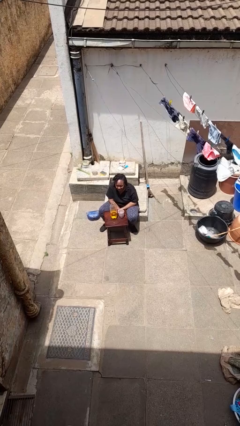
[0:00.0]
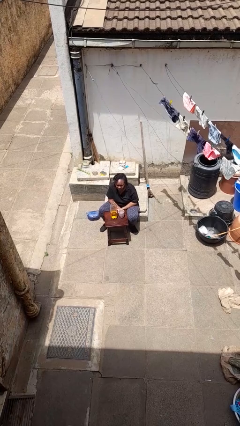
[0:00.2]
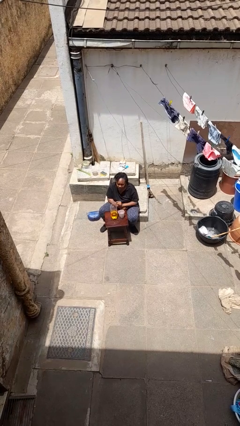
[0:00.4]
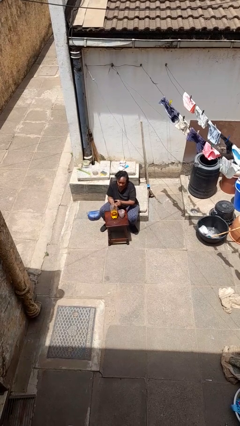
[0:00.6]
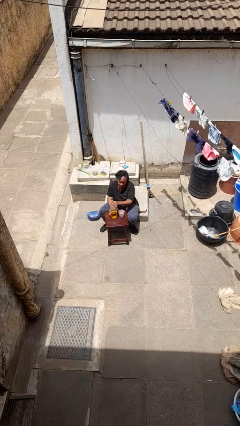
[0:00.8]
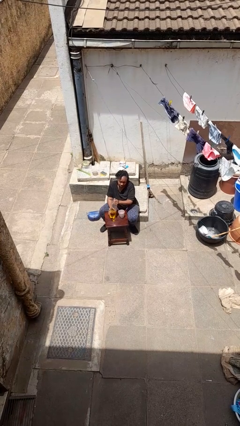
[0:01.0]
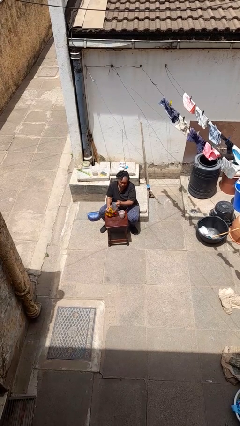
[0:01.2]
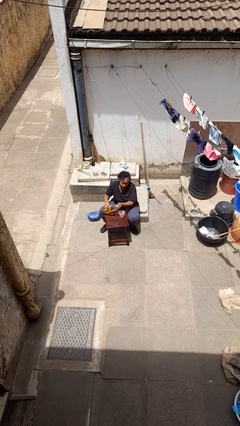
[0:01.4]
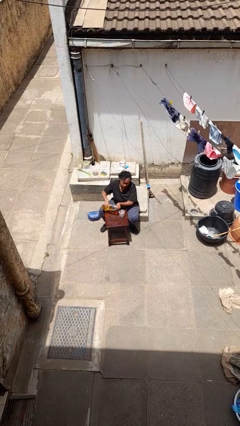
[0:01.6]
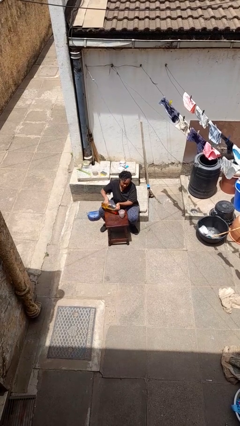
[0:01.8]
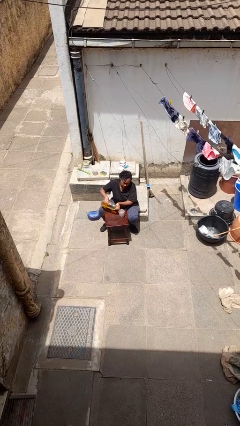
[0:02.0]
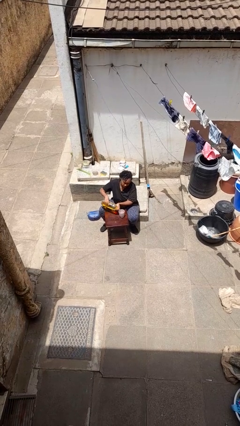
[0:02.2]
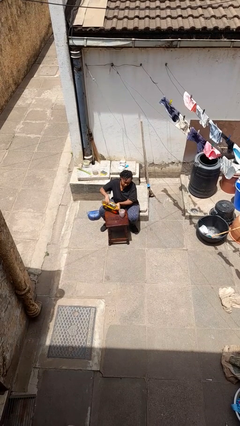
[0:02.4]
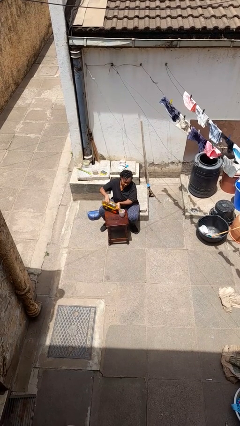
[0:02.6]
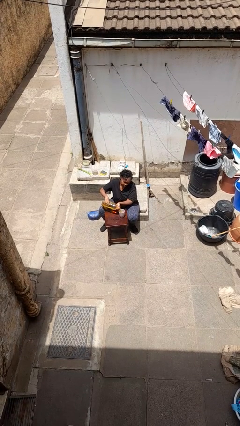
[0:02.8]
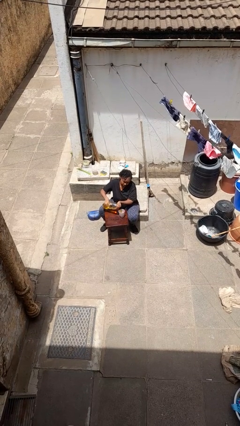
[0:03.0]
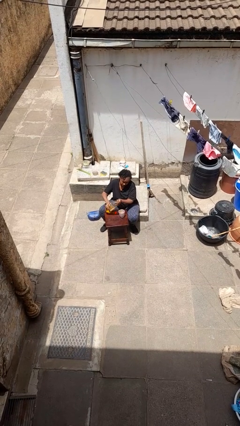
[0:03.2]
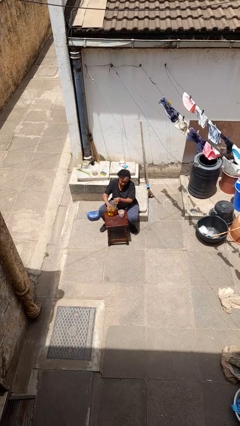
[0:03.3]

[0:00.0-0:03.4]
person pours liquid into cup

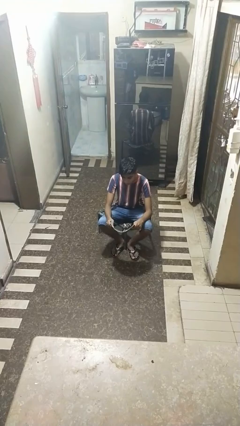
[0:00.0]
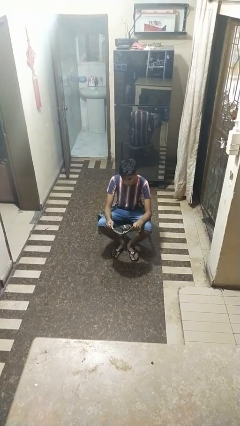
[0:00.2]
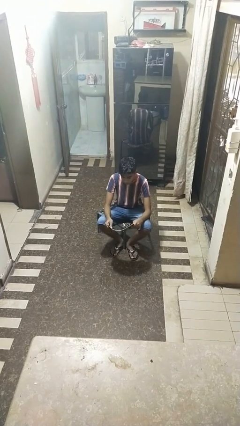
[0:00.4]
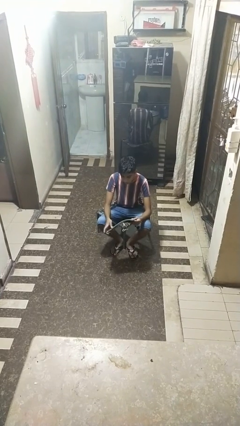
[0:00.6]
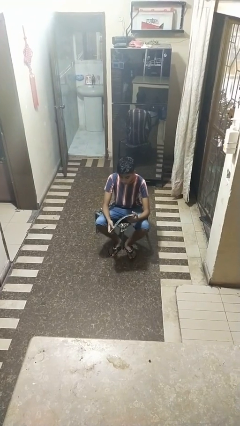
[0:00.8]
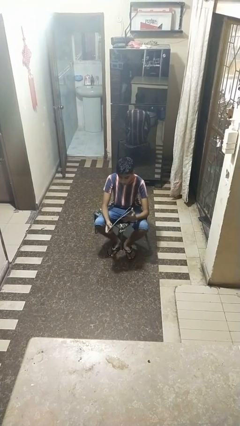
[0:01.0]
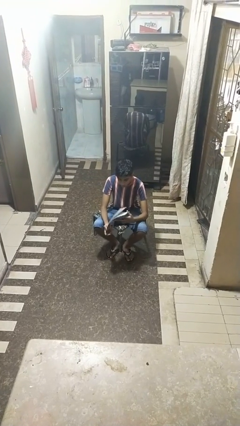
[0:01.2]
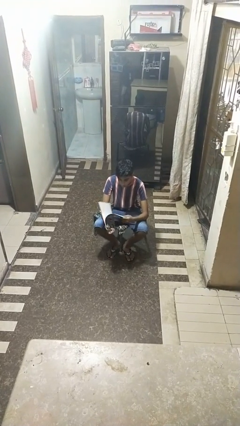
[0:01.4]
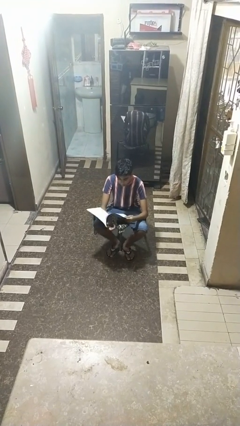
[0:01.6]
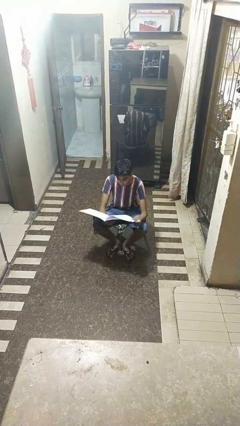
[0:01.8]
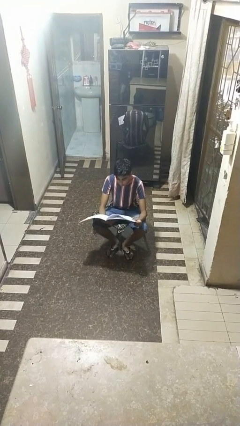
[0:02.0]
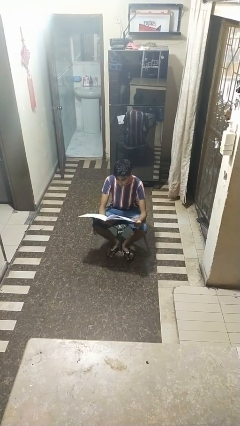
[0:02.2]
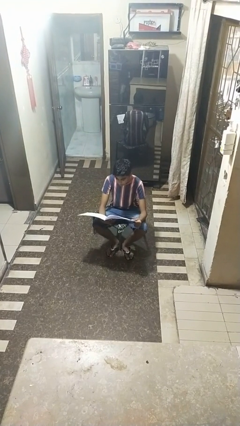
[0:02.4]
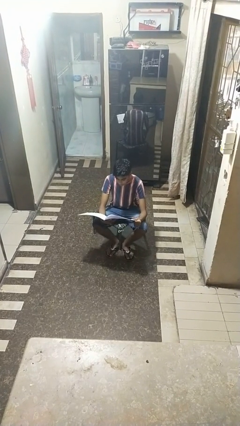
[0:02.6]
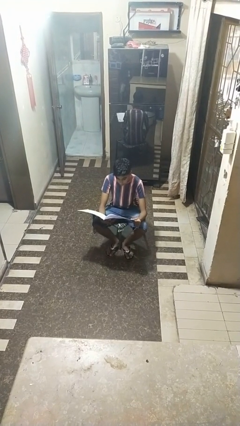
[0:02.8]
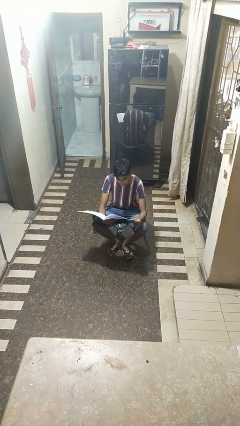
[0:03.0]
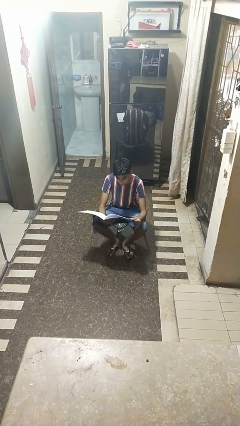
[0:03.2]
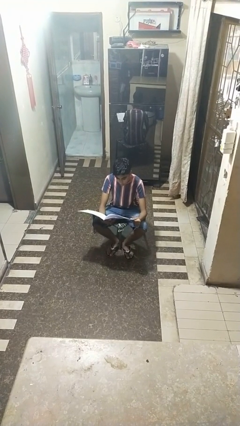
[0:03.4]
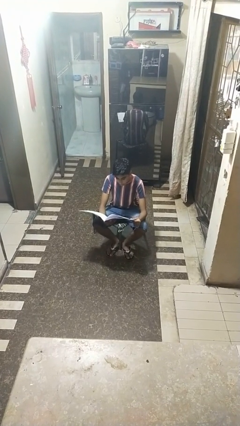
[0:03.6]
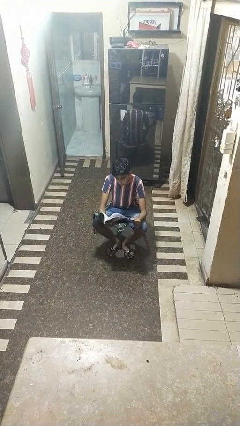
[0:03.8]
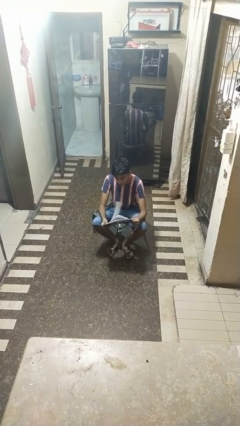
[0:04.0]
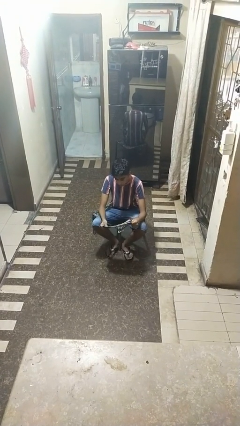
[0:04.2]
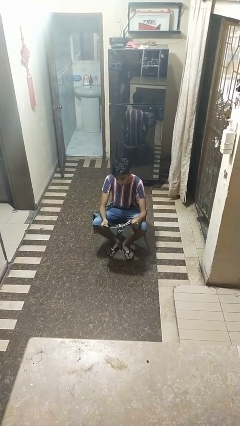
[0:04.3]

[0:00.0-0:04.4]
person reads magazine

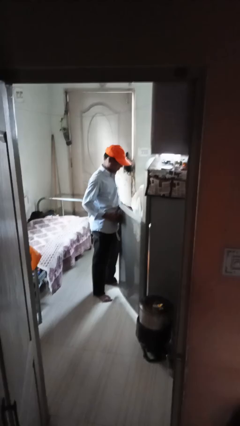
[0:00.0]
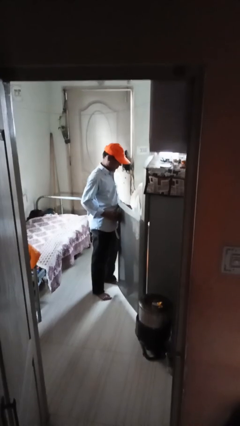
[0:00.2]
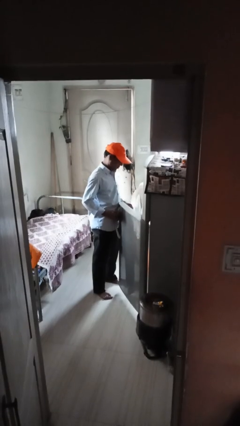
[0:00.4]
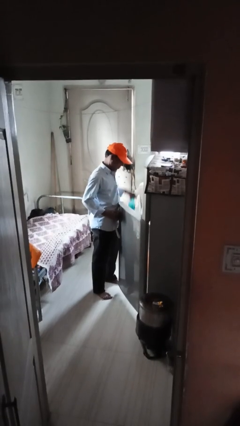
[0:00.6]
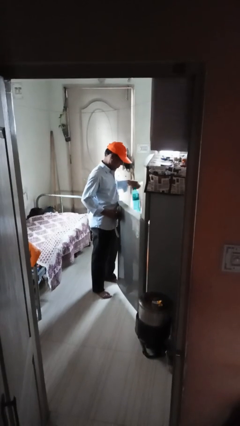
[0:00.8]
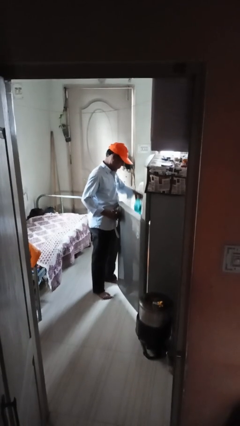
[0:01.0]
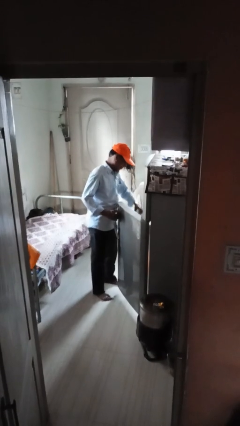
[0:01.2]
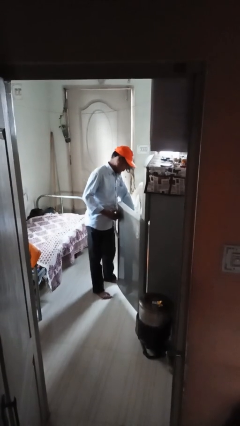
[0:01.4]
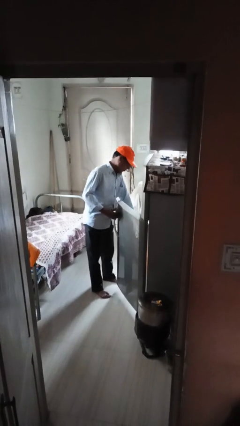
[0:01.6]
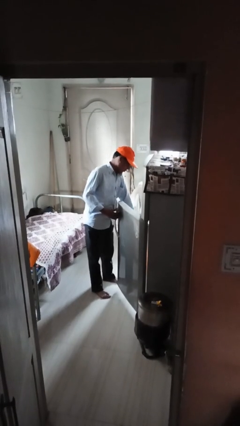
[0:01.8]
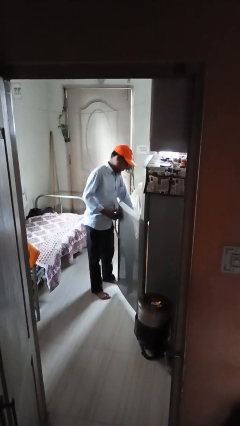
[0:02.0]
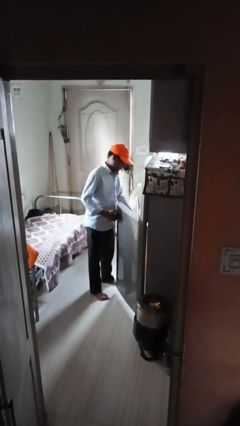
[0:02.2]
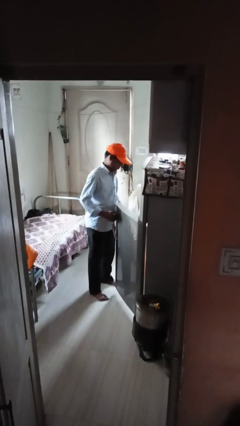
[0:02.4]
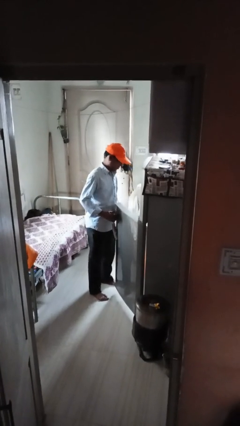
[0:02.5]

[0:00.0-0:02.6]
person puts object into refrigerator

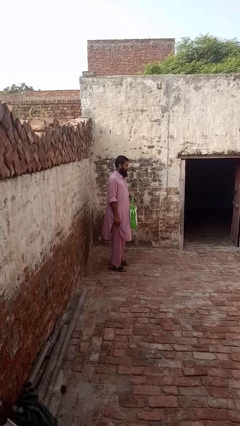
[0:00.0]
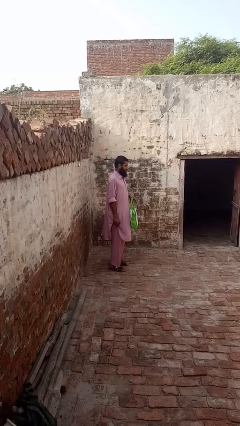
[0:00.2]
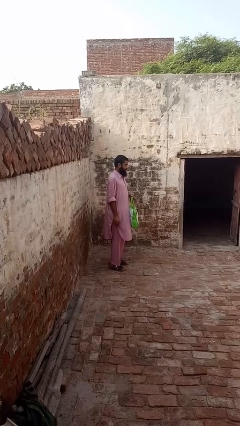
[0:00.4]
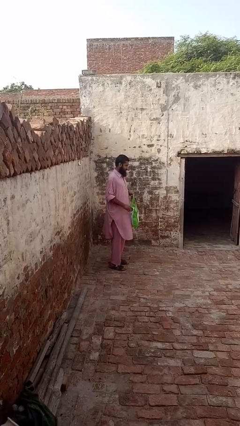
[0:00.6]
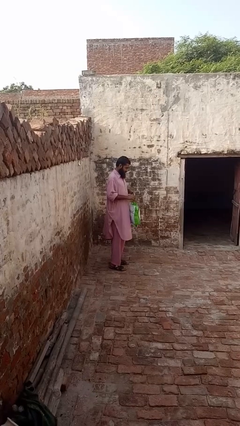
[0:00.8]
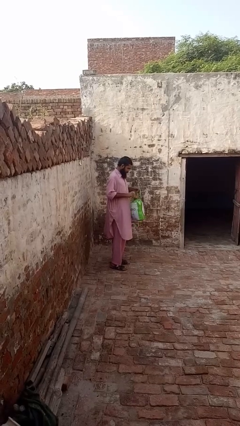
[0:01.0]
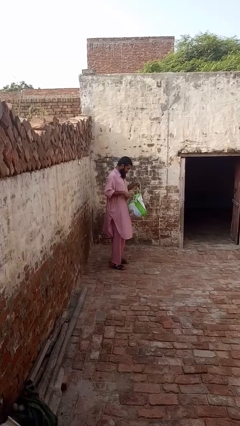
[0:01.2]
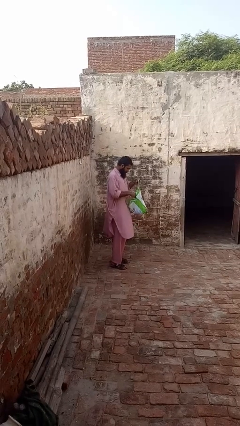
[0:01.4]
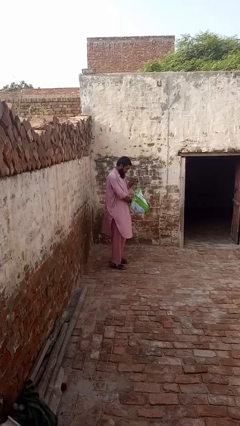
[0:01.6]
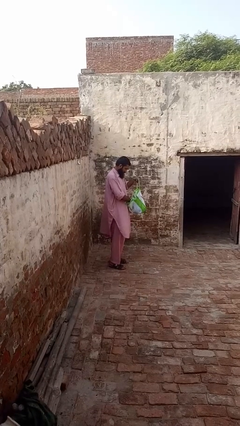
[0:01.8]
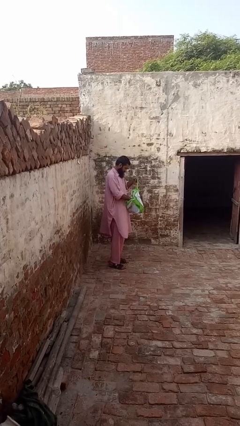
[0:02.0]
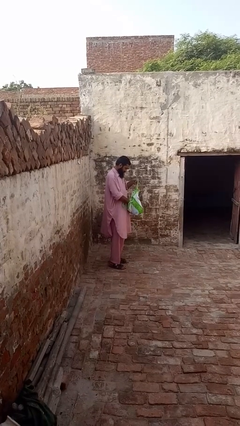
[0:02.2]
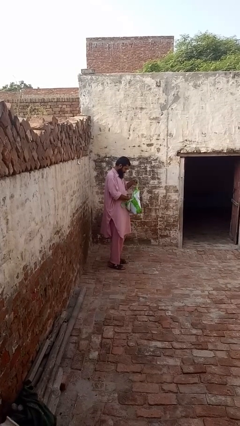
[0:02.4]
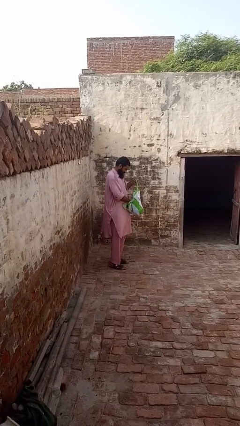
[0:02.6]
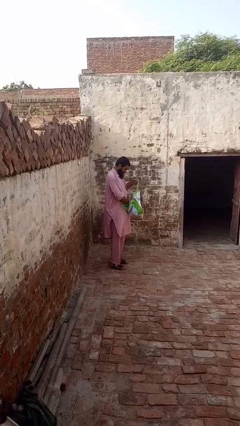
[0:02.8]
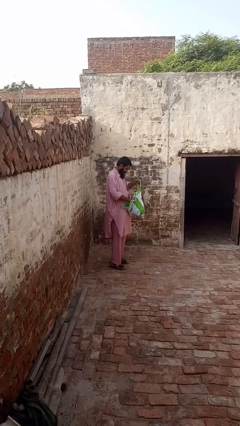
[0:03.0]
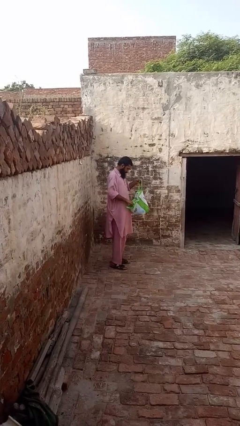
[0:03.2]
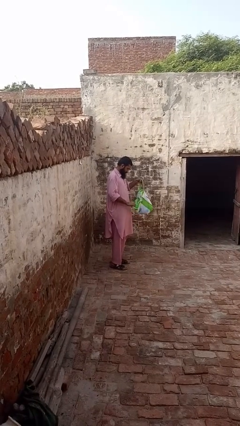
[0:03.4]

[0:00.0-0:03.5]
person searches in bag

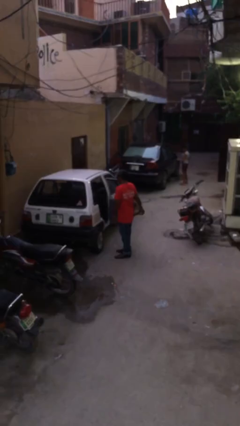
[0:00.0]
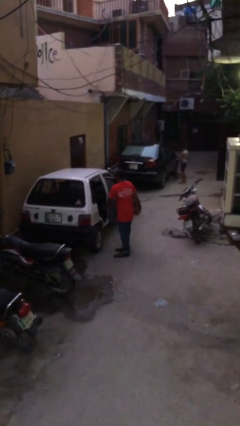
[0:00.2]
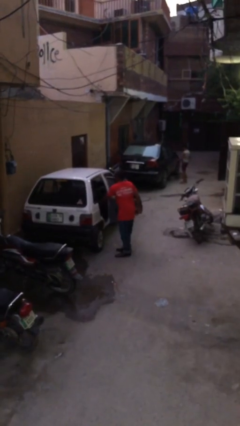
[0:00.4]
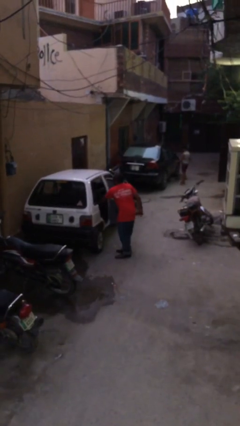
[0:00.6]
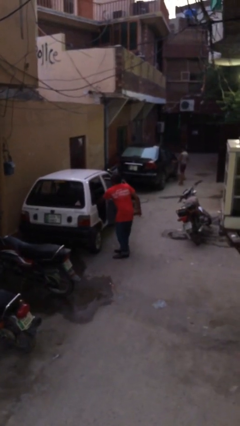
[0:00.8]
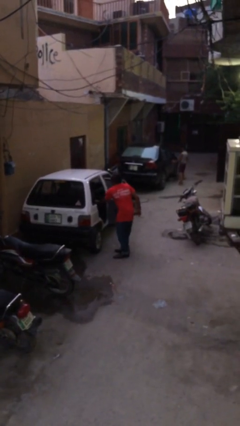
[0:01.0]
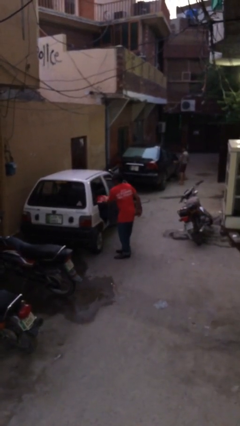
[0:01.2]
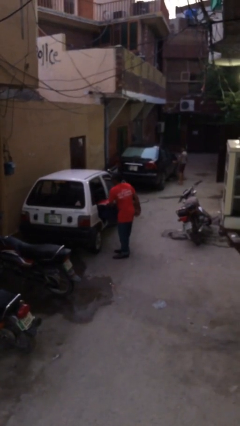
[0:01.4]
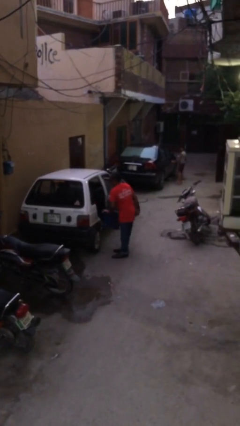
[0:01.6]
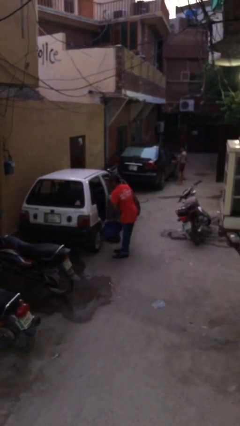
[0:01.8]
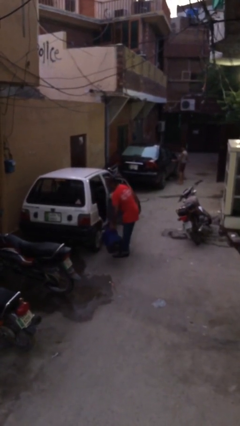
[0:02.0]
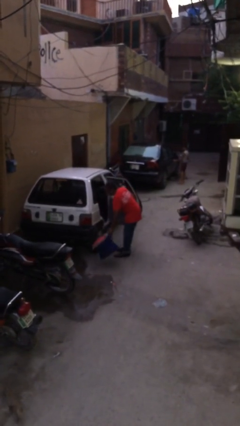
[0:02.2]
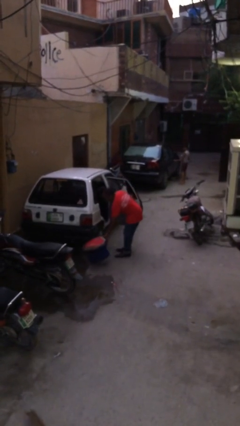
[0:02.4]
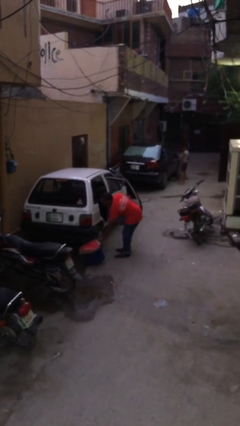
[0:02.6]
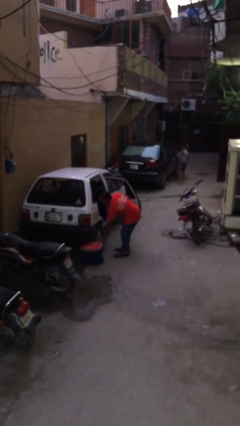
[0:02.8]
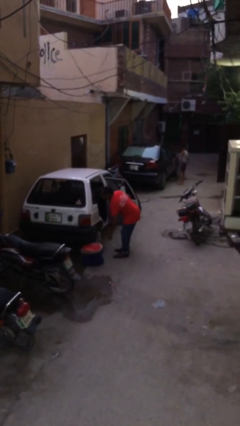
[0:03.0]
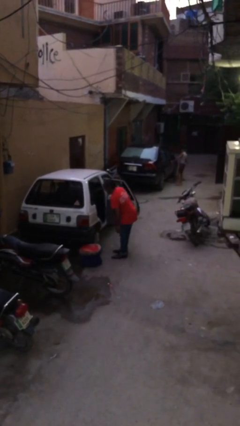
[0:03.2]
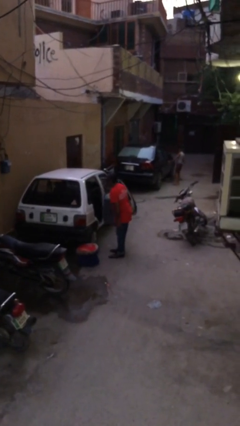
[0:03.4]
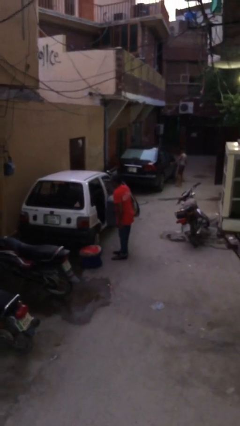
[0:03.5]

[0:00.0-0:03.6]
person unloads car

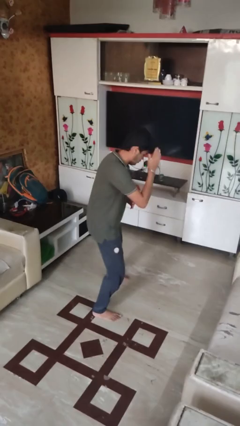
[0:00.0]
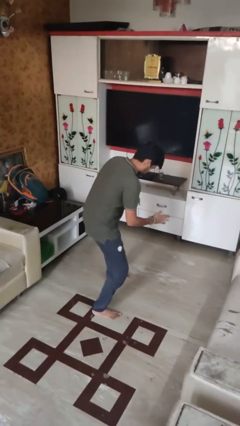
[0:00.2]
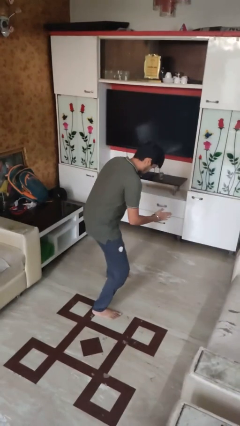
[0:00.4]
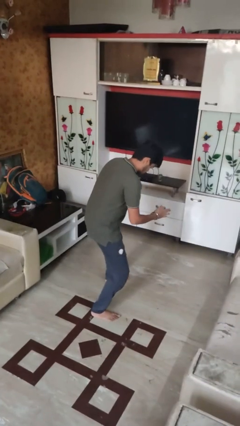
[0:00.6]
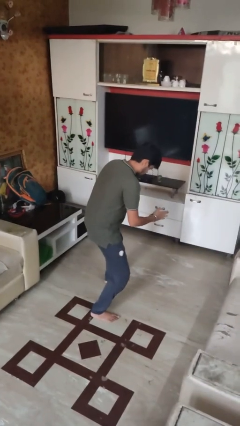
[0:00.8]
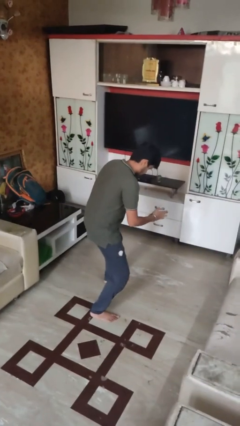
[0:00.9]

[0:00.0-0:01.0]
person karate chop
